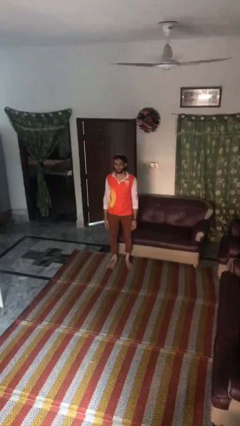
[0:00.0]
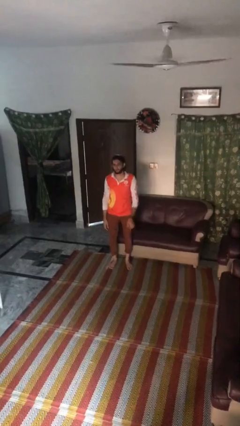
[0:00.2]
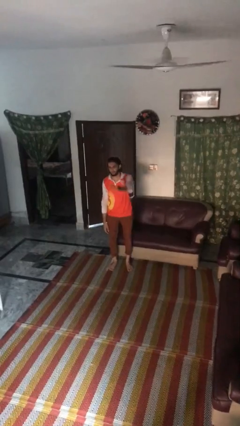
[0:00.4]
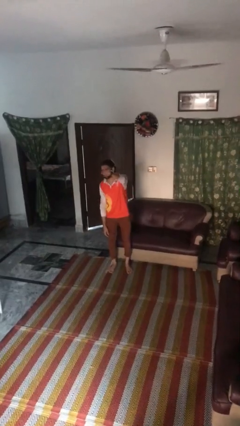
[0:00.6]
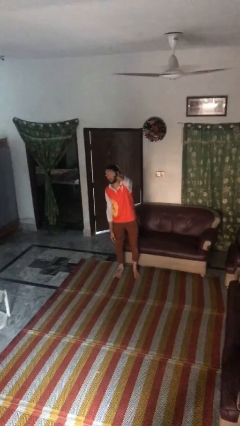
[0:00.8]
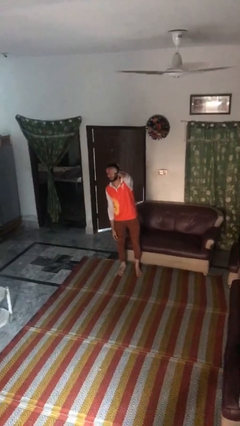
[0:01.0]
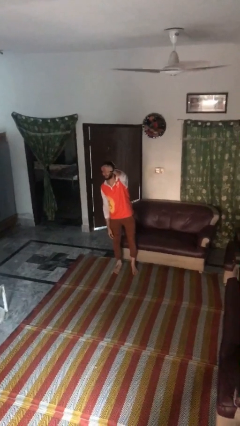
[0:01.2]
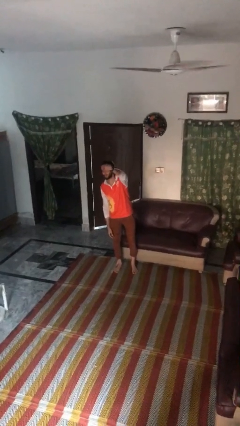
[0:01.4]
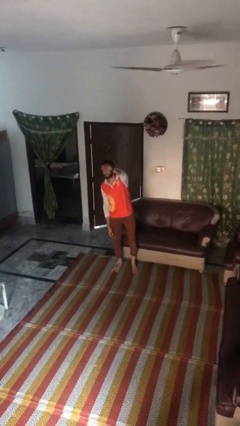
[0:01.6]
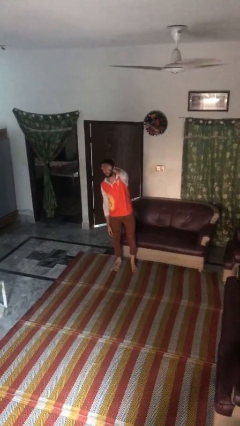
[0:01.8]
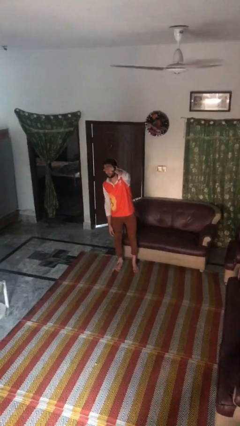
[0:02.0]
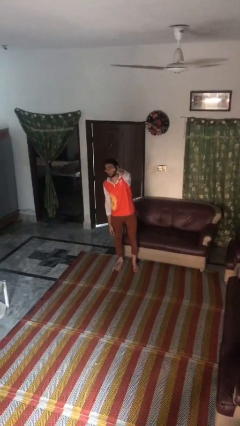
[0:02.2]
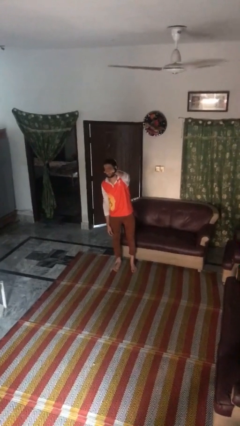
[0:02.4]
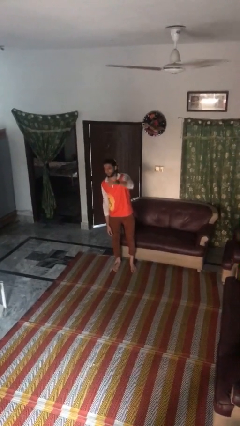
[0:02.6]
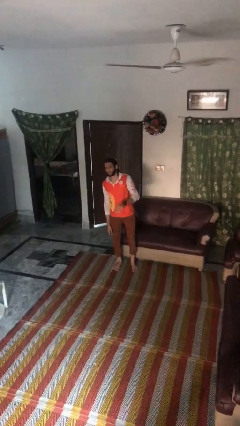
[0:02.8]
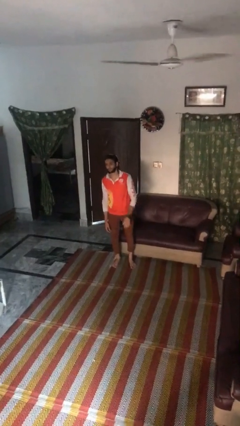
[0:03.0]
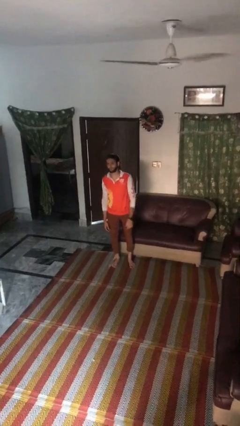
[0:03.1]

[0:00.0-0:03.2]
person gestures come here

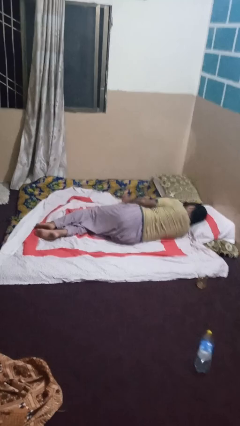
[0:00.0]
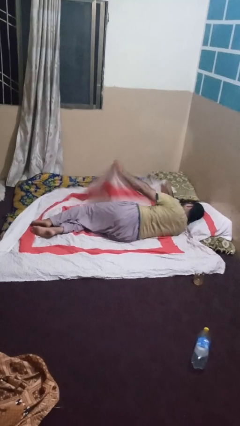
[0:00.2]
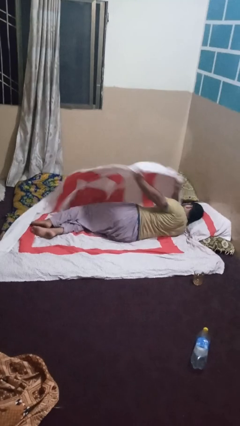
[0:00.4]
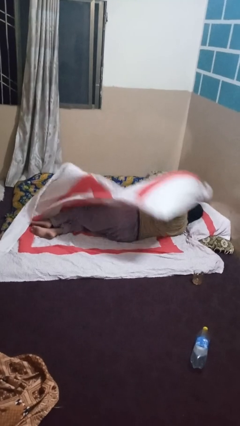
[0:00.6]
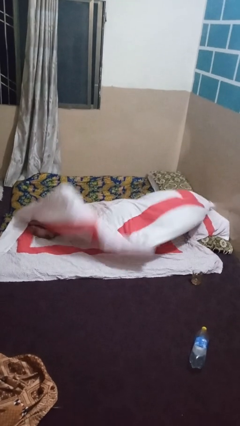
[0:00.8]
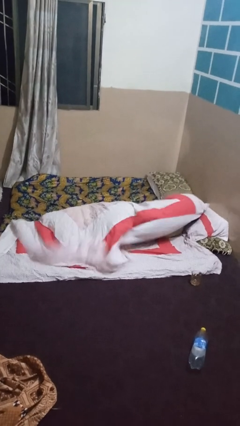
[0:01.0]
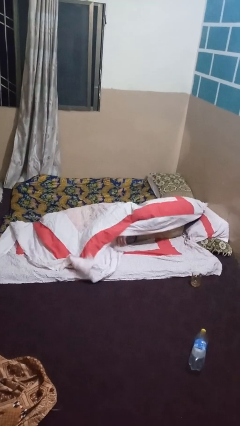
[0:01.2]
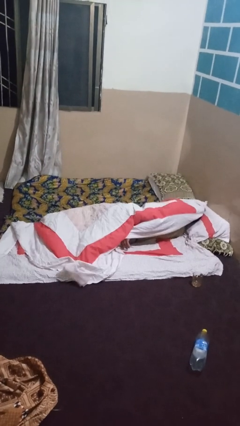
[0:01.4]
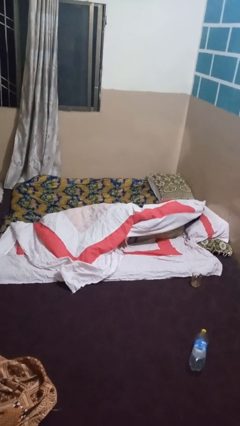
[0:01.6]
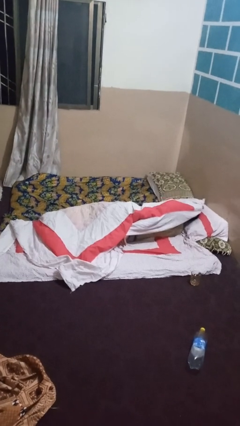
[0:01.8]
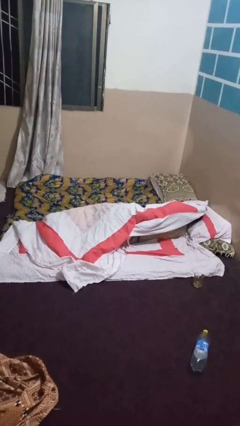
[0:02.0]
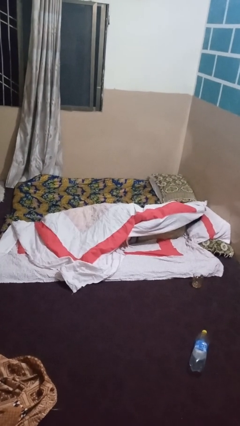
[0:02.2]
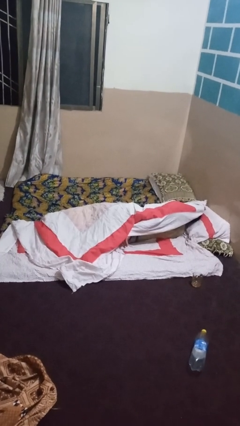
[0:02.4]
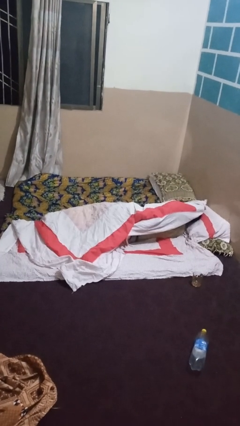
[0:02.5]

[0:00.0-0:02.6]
person covers with bedsheets

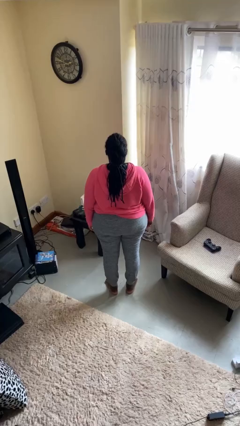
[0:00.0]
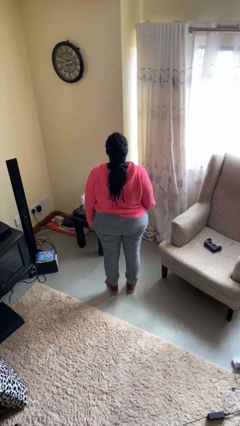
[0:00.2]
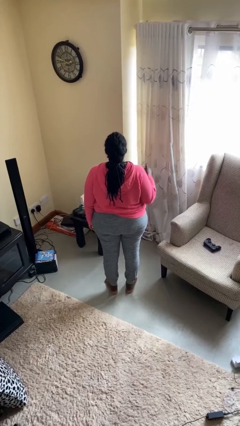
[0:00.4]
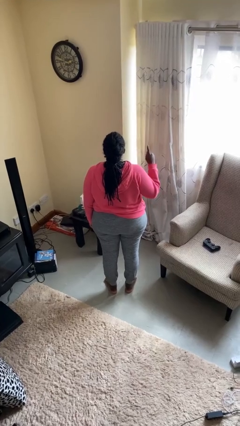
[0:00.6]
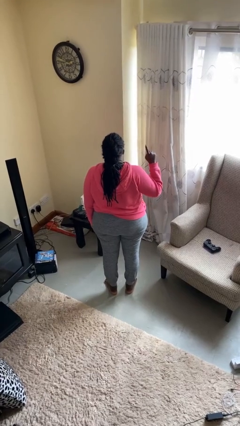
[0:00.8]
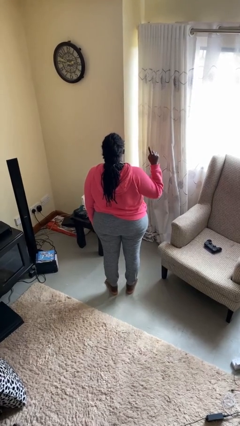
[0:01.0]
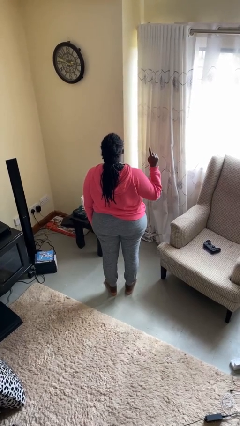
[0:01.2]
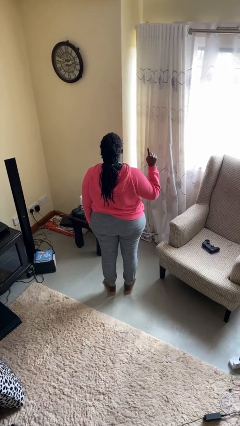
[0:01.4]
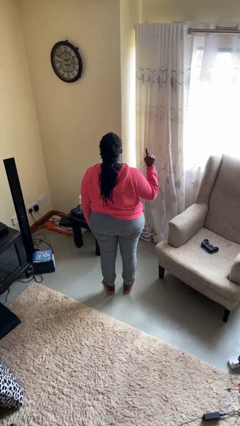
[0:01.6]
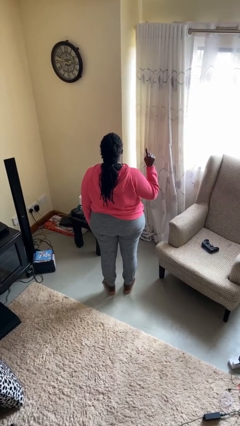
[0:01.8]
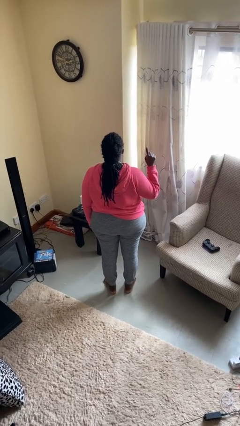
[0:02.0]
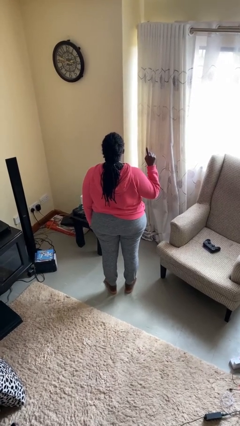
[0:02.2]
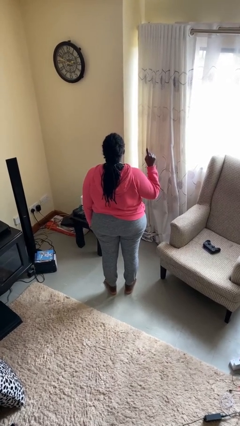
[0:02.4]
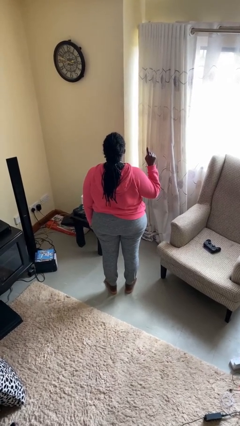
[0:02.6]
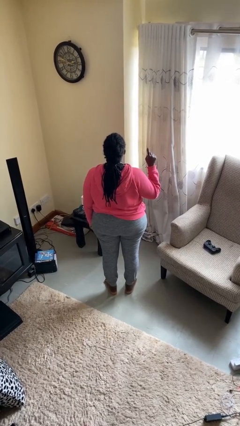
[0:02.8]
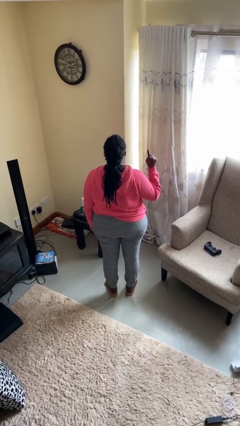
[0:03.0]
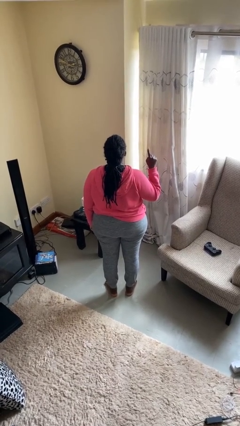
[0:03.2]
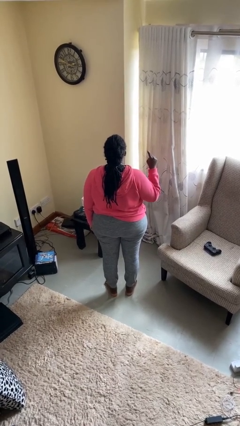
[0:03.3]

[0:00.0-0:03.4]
person gestures number one

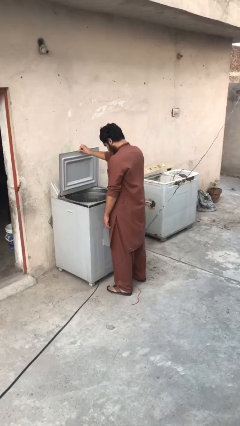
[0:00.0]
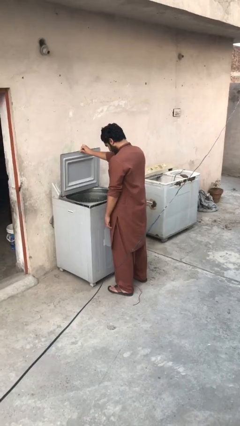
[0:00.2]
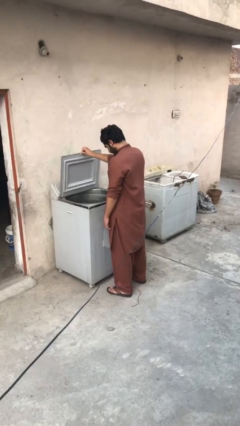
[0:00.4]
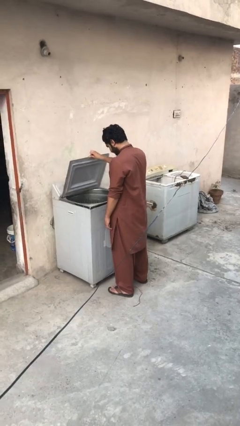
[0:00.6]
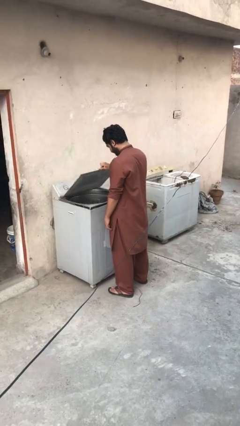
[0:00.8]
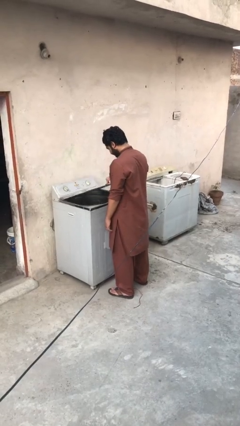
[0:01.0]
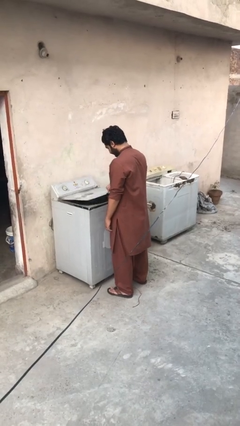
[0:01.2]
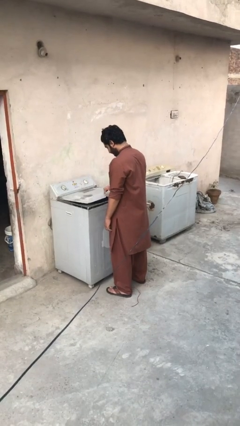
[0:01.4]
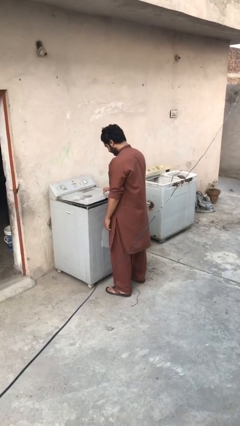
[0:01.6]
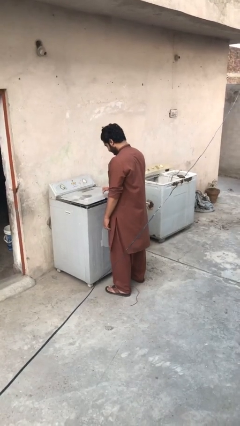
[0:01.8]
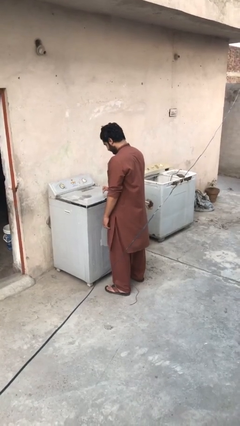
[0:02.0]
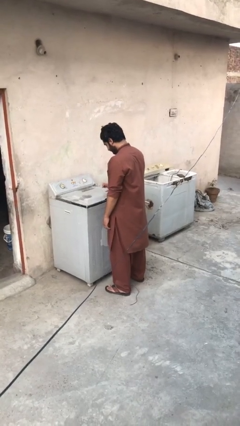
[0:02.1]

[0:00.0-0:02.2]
person closes clothes washer

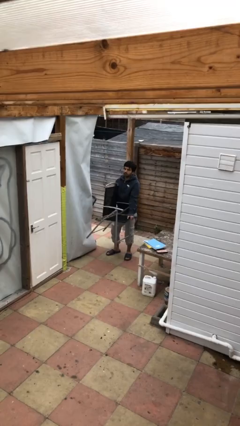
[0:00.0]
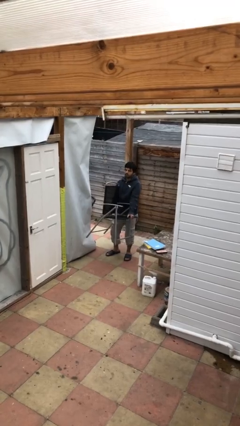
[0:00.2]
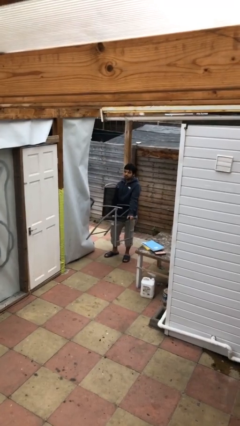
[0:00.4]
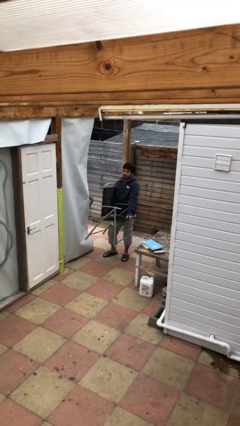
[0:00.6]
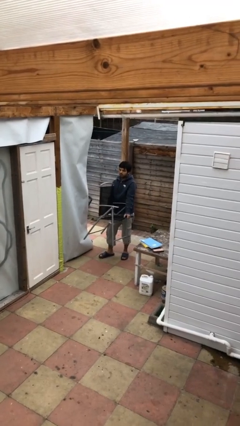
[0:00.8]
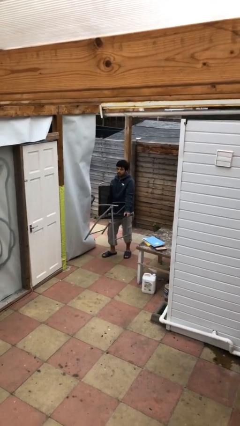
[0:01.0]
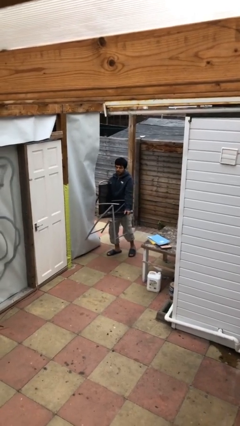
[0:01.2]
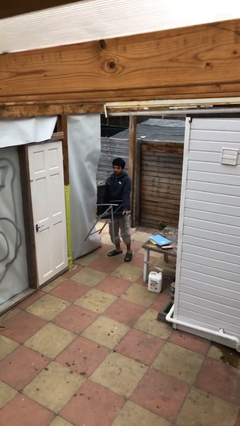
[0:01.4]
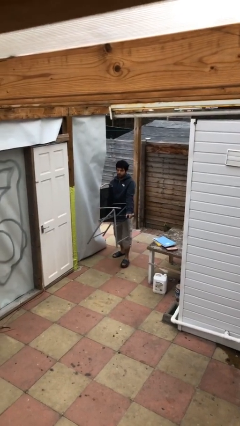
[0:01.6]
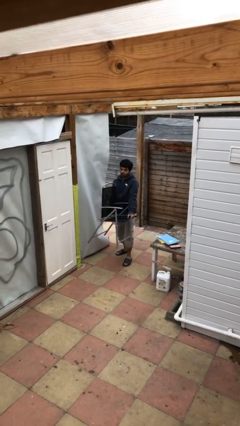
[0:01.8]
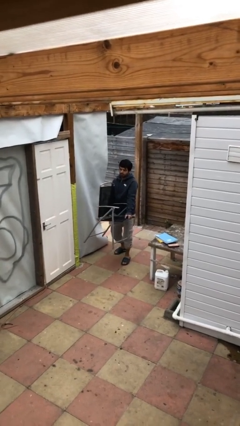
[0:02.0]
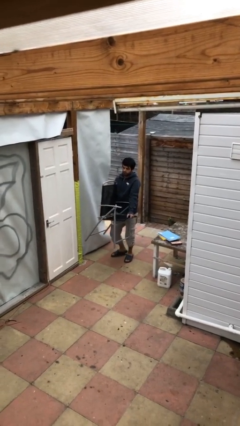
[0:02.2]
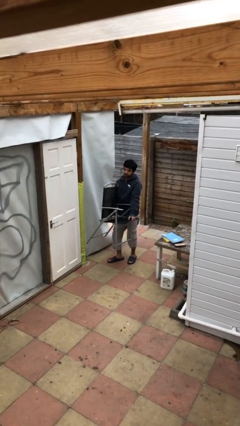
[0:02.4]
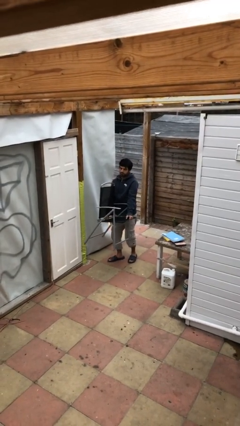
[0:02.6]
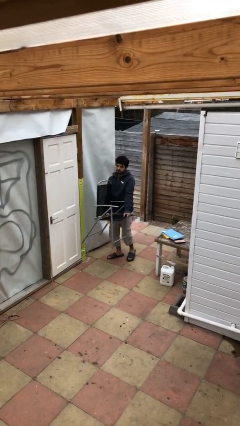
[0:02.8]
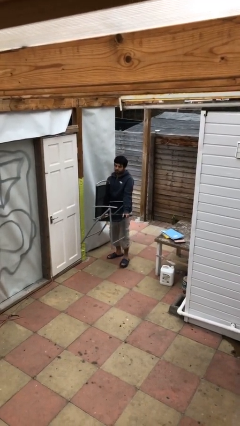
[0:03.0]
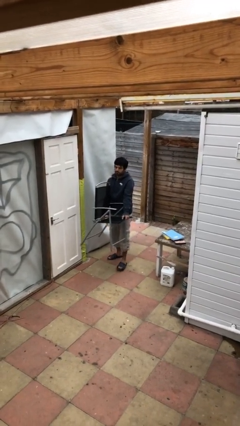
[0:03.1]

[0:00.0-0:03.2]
person carries heavy object

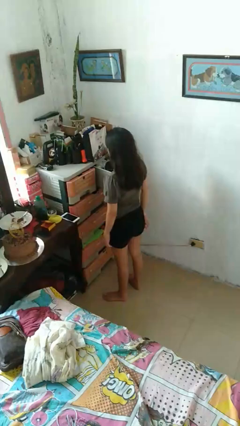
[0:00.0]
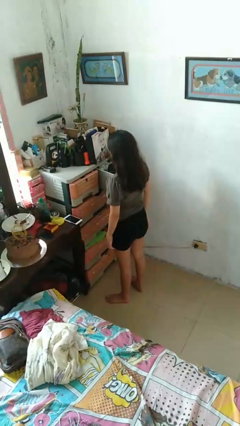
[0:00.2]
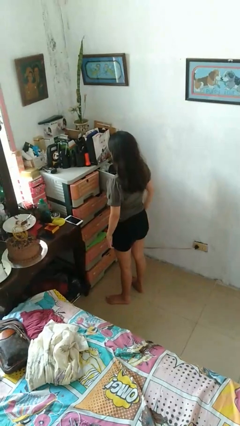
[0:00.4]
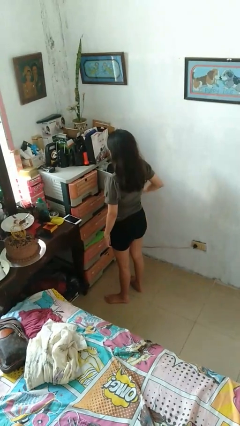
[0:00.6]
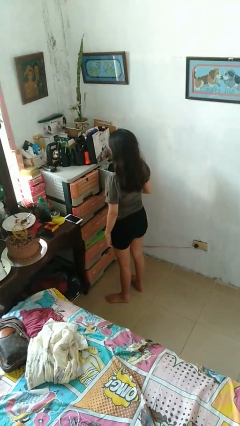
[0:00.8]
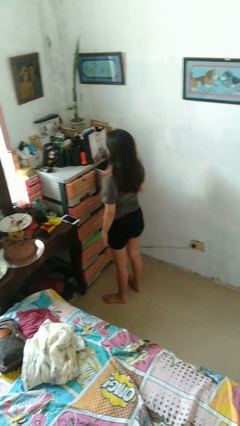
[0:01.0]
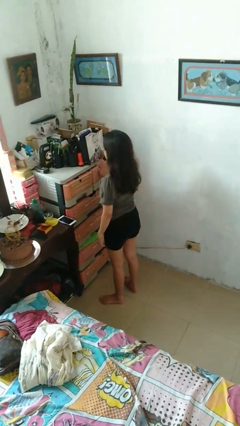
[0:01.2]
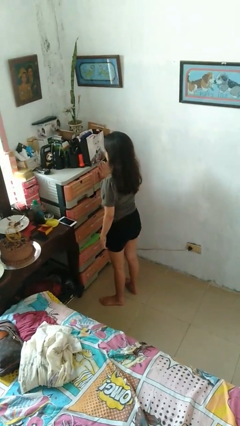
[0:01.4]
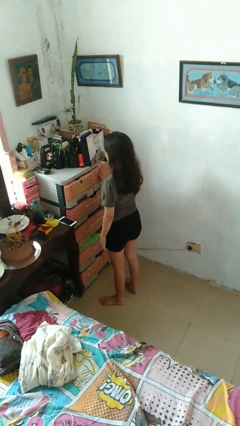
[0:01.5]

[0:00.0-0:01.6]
person closes dresser drawer

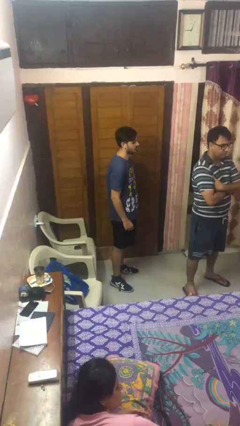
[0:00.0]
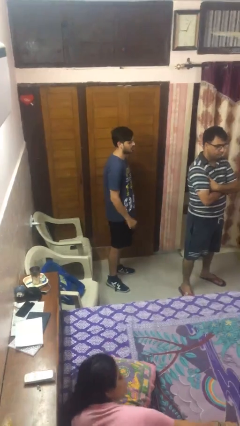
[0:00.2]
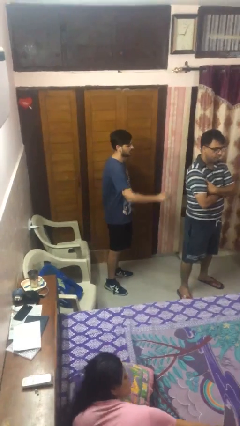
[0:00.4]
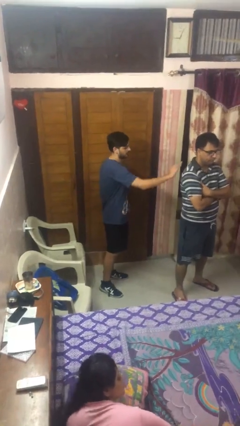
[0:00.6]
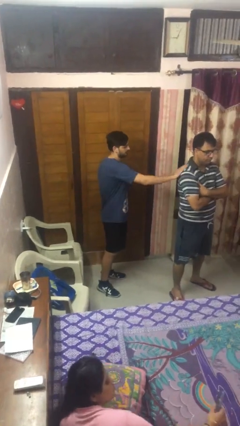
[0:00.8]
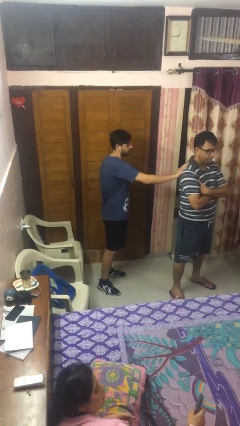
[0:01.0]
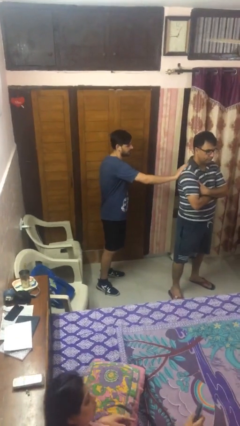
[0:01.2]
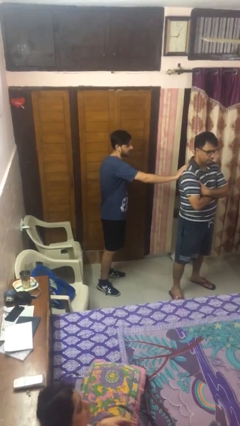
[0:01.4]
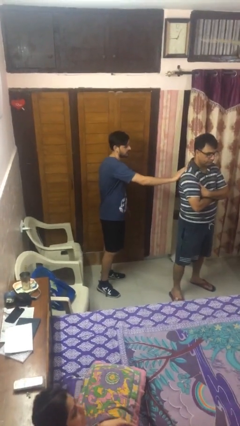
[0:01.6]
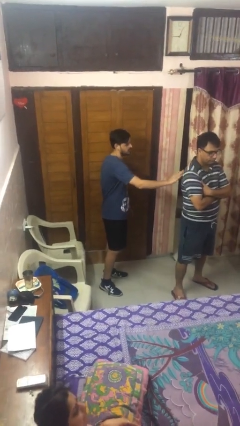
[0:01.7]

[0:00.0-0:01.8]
person touches back of person
